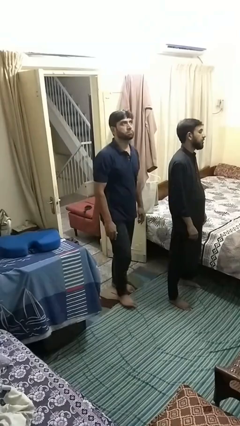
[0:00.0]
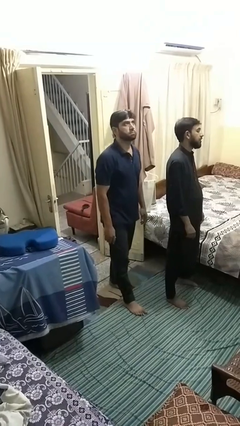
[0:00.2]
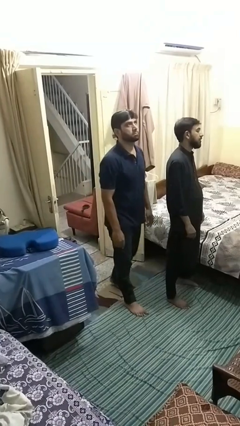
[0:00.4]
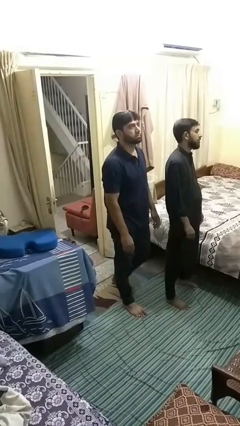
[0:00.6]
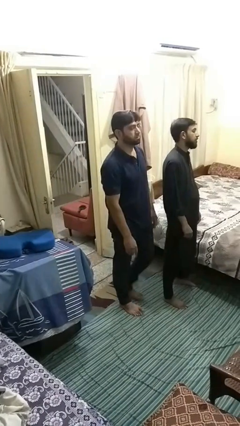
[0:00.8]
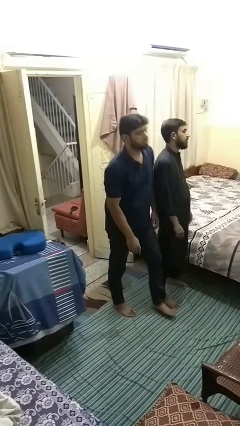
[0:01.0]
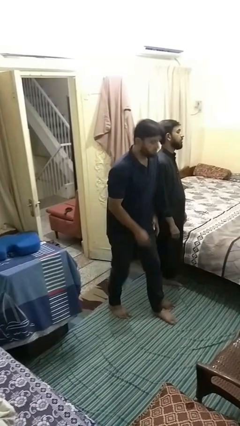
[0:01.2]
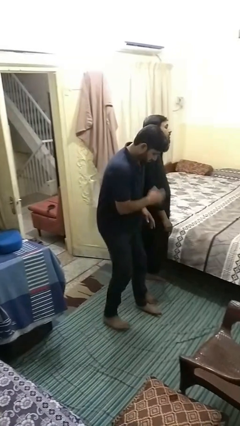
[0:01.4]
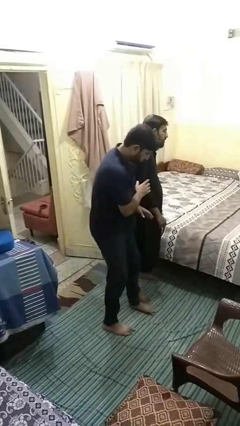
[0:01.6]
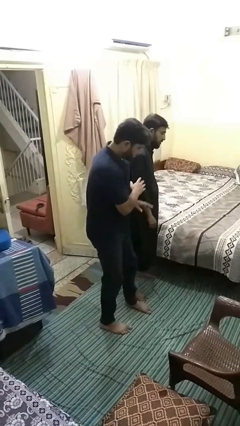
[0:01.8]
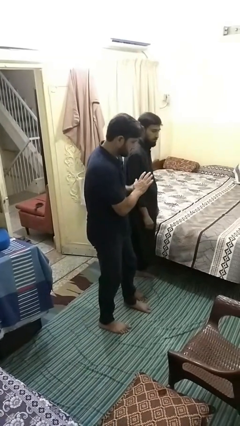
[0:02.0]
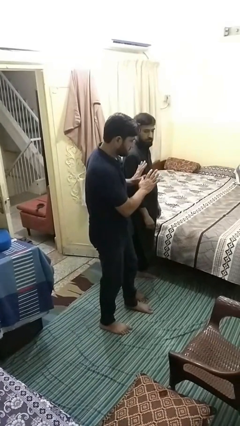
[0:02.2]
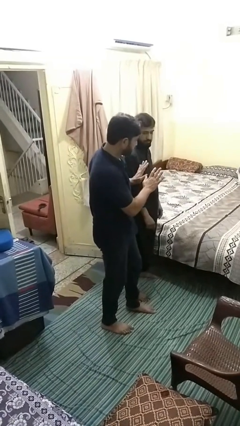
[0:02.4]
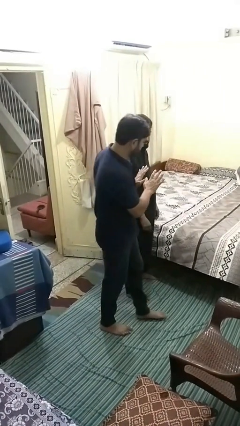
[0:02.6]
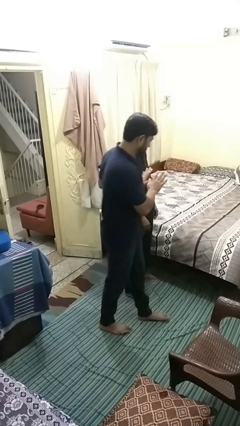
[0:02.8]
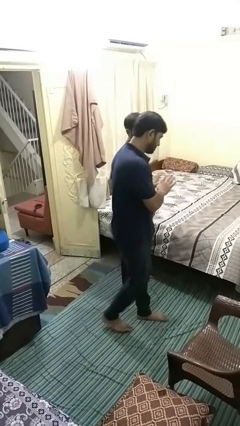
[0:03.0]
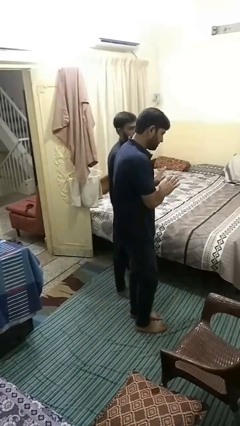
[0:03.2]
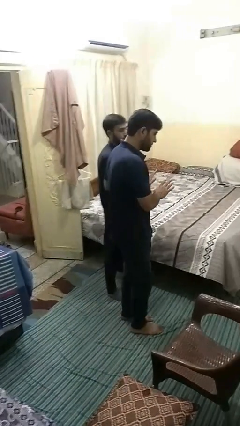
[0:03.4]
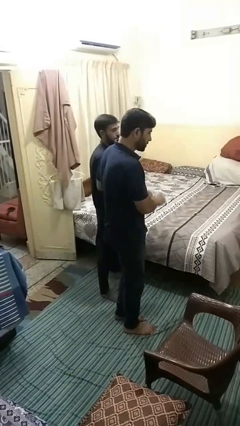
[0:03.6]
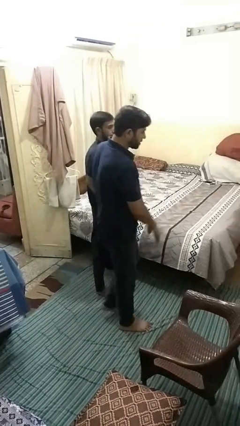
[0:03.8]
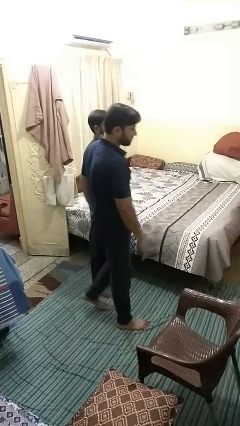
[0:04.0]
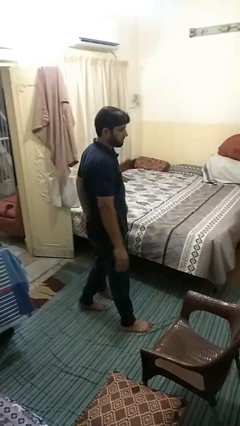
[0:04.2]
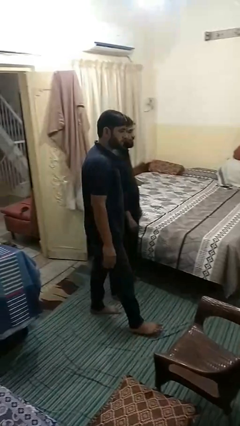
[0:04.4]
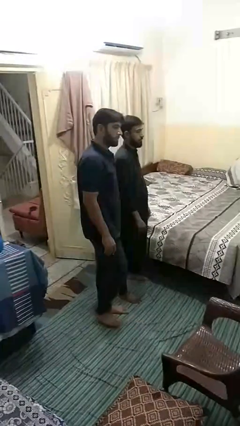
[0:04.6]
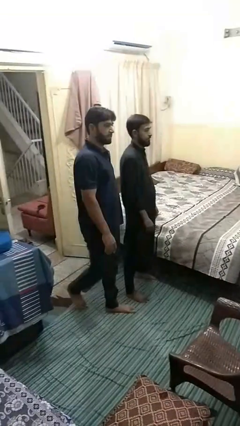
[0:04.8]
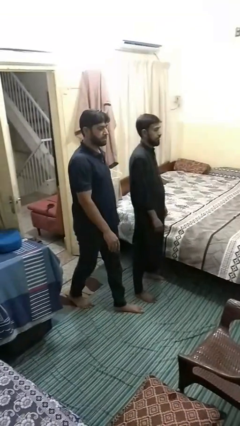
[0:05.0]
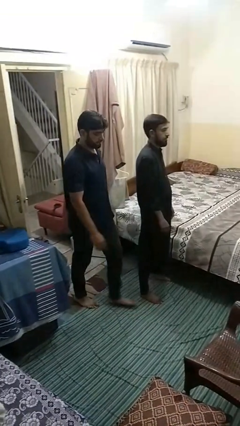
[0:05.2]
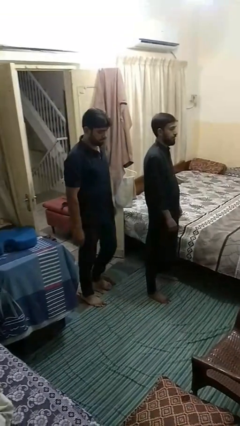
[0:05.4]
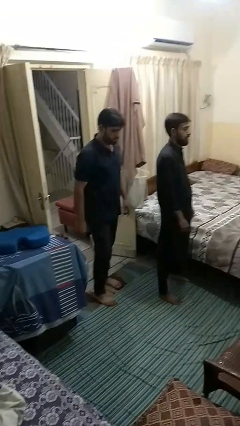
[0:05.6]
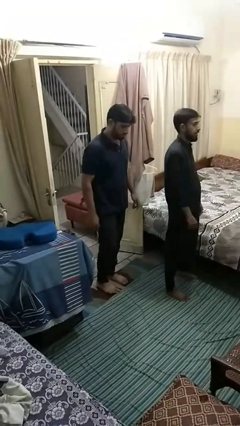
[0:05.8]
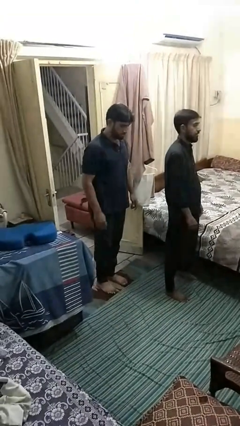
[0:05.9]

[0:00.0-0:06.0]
person bumps into person

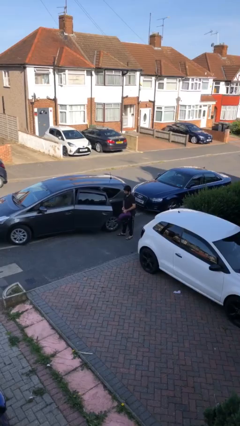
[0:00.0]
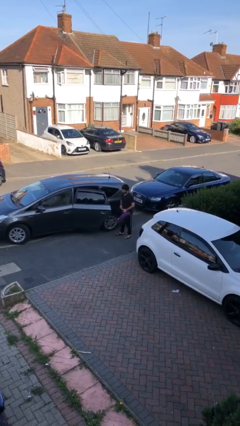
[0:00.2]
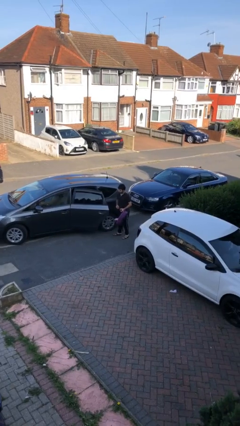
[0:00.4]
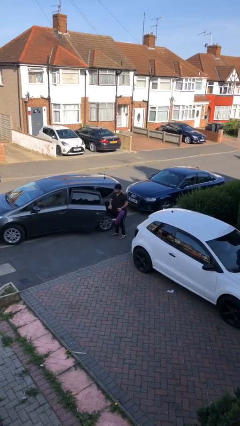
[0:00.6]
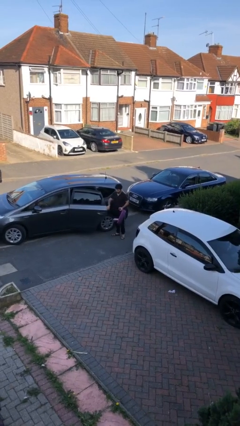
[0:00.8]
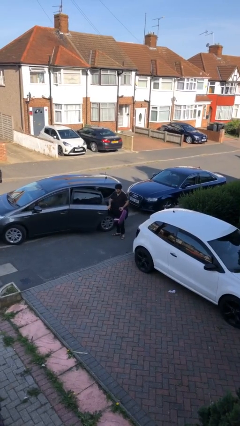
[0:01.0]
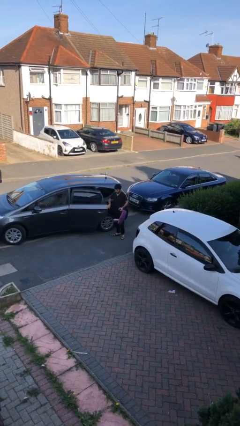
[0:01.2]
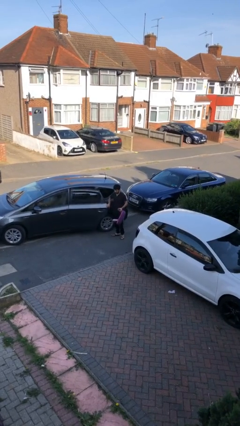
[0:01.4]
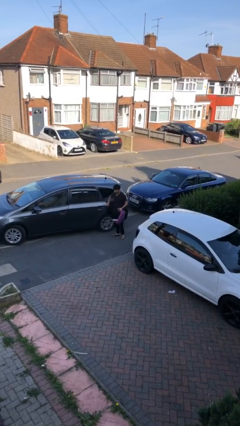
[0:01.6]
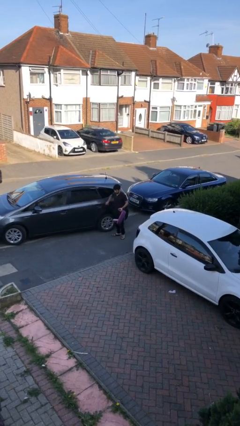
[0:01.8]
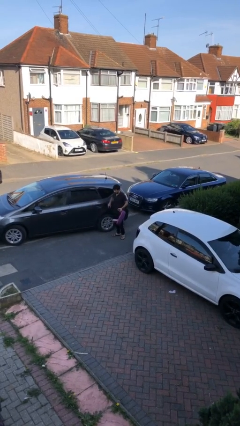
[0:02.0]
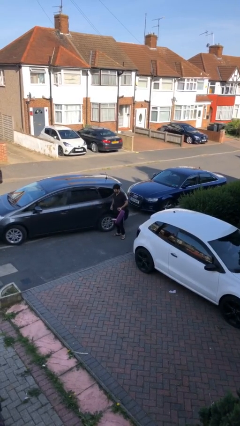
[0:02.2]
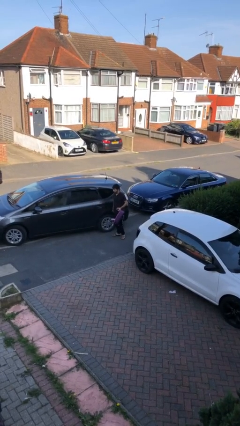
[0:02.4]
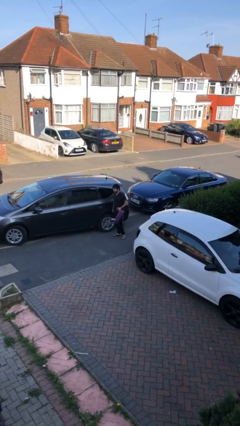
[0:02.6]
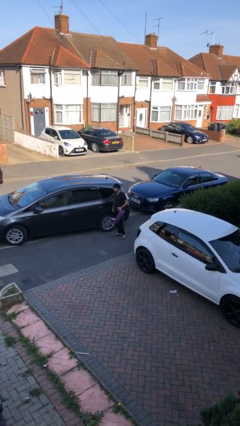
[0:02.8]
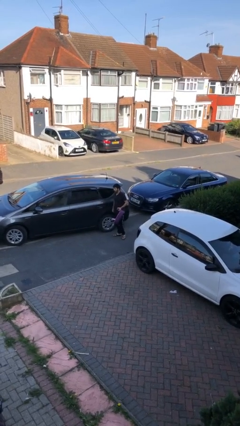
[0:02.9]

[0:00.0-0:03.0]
person closes car door

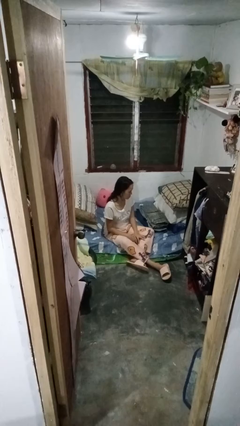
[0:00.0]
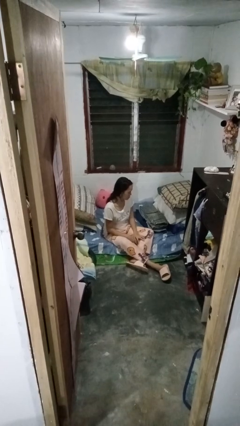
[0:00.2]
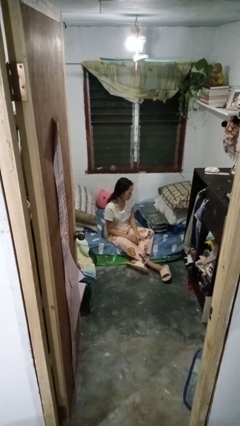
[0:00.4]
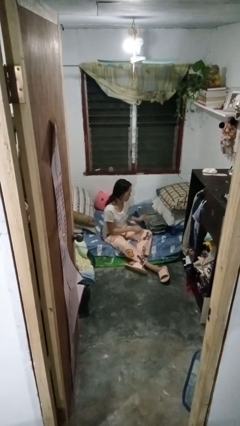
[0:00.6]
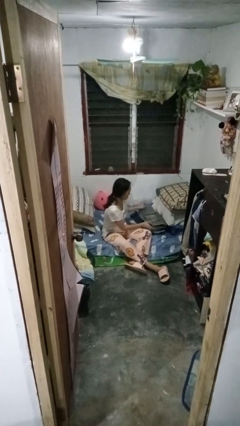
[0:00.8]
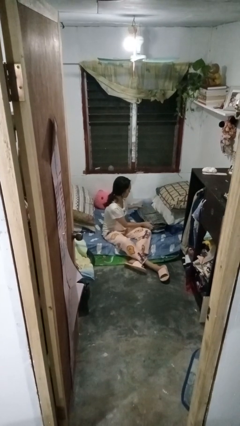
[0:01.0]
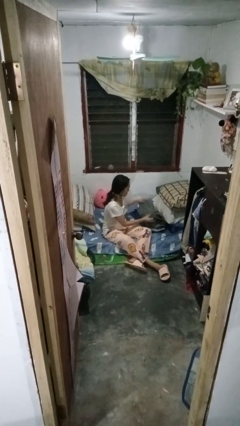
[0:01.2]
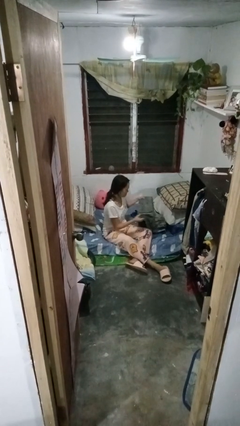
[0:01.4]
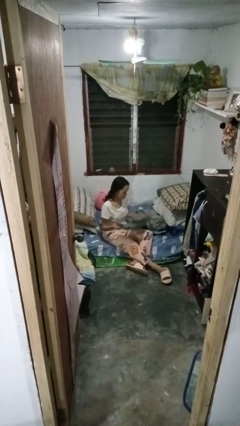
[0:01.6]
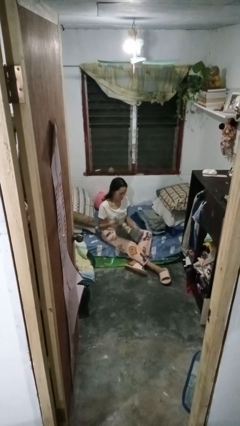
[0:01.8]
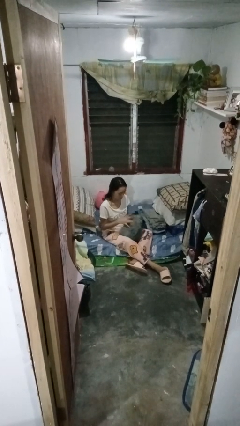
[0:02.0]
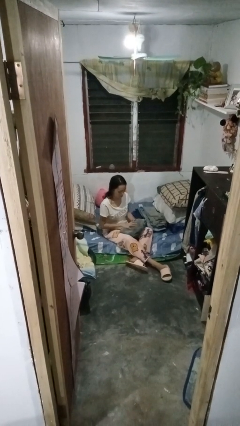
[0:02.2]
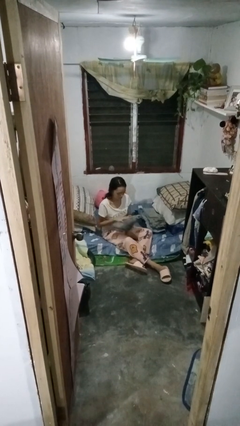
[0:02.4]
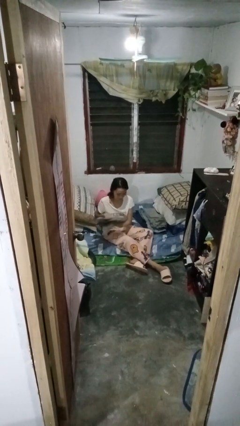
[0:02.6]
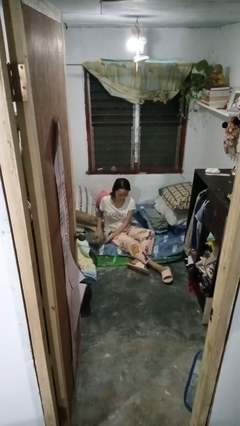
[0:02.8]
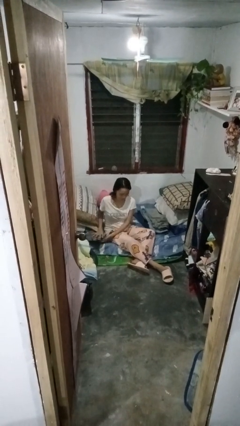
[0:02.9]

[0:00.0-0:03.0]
person folds pants

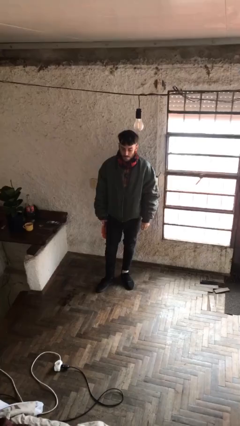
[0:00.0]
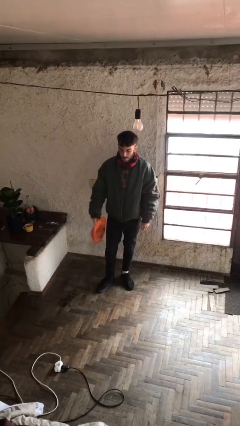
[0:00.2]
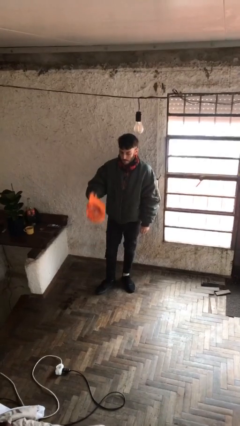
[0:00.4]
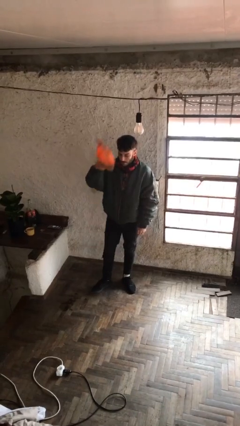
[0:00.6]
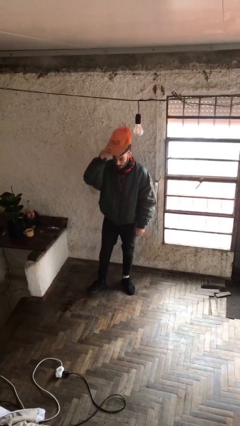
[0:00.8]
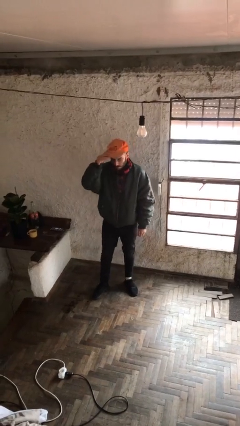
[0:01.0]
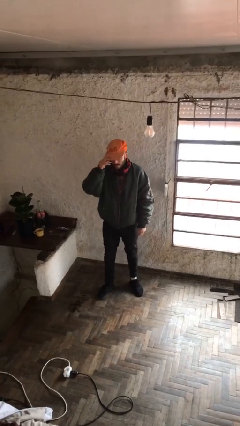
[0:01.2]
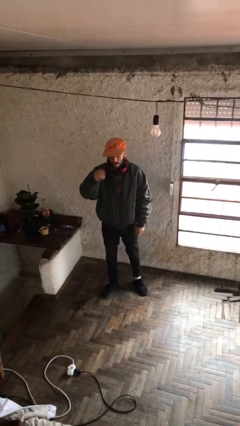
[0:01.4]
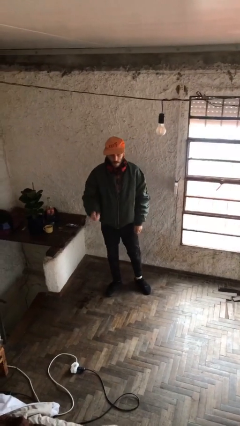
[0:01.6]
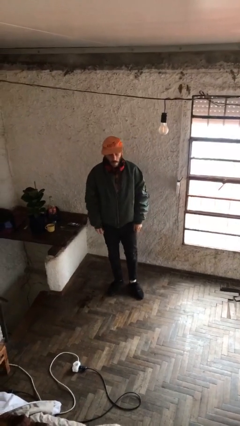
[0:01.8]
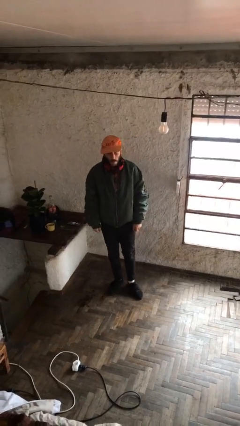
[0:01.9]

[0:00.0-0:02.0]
person puts on hat

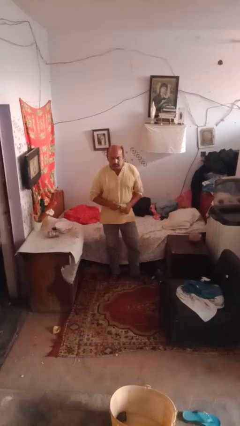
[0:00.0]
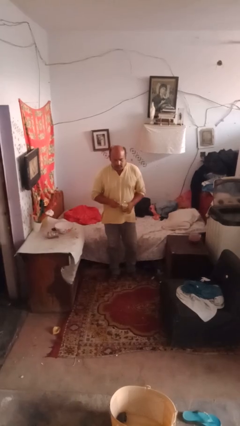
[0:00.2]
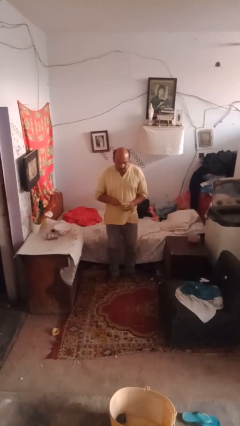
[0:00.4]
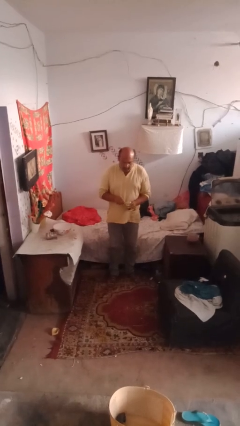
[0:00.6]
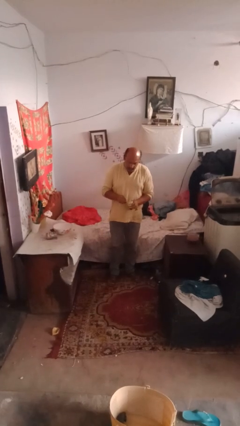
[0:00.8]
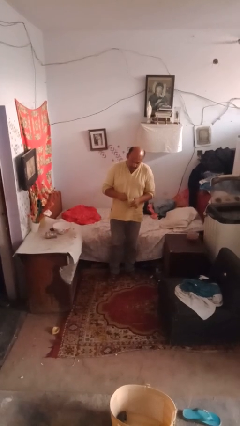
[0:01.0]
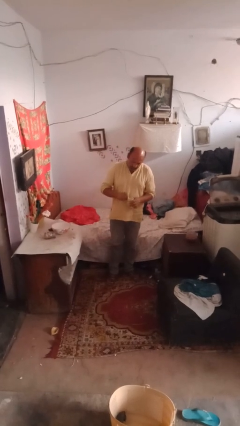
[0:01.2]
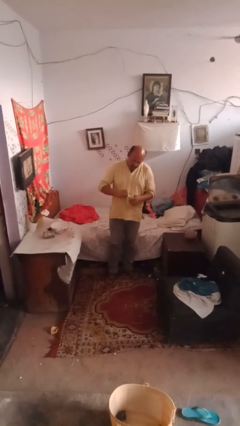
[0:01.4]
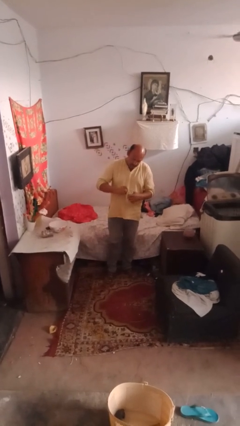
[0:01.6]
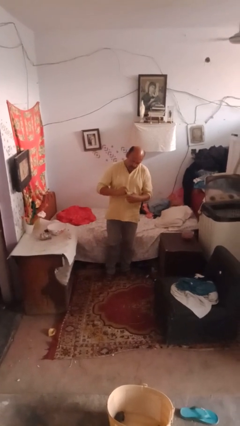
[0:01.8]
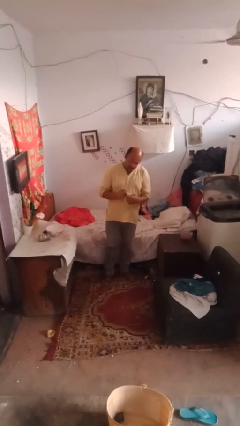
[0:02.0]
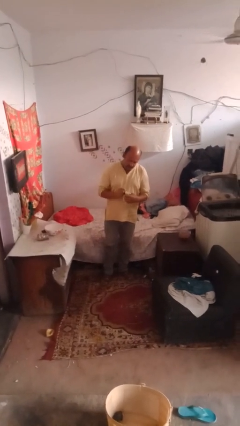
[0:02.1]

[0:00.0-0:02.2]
person opens can with can opener

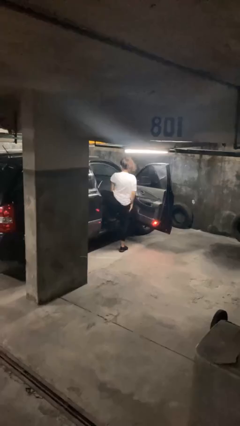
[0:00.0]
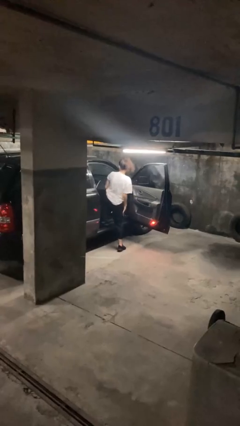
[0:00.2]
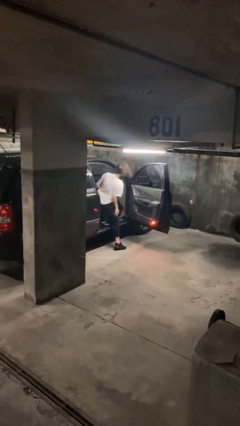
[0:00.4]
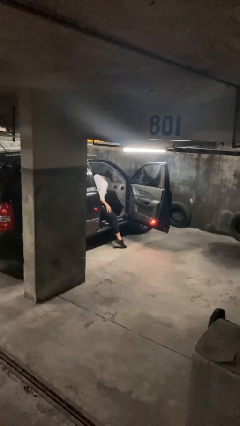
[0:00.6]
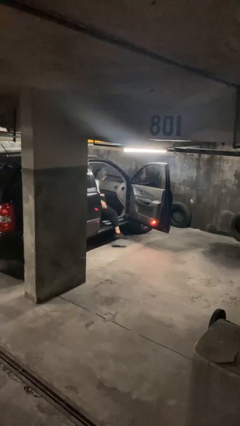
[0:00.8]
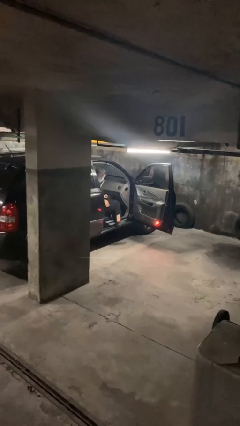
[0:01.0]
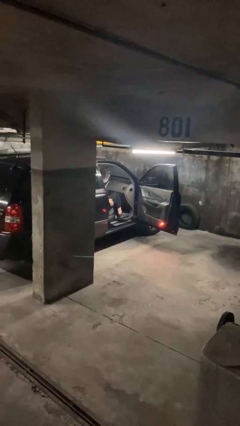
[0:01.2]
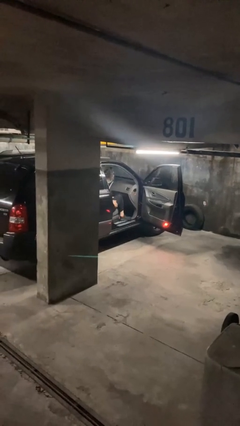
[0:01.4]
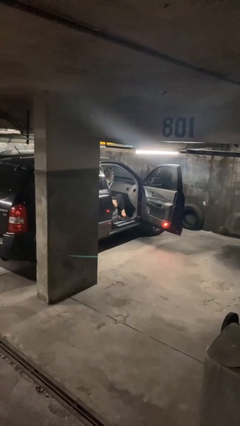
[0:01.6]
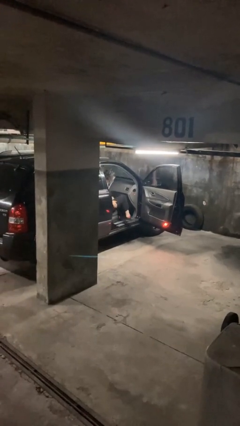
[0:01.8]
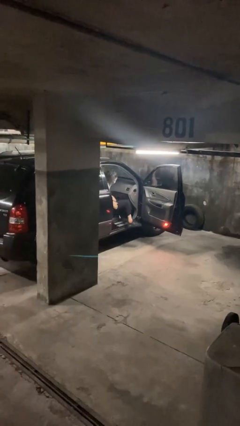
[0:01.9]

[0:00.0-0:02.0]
person enters car
